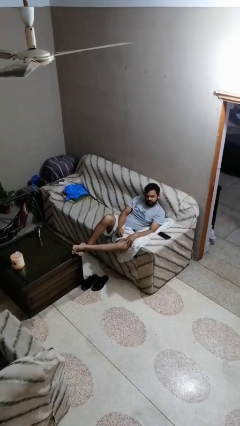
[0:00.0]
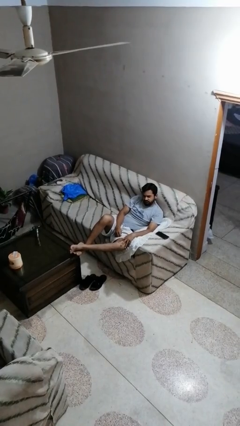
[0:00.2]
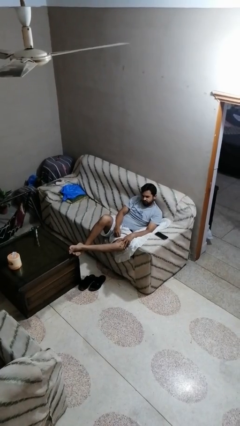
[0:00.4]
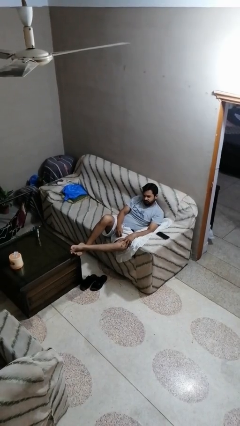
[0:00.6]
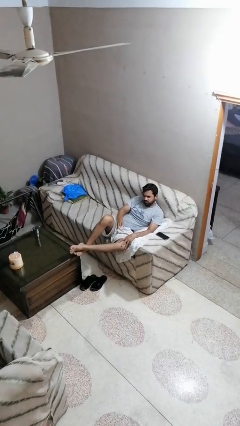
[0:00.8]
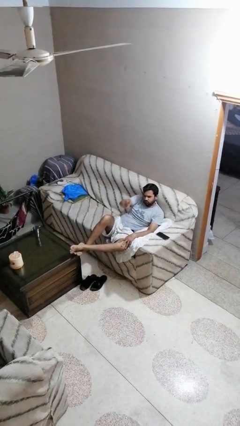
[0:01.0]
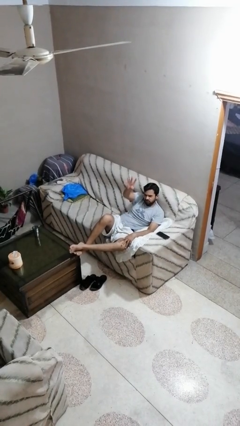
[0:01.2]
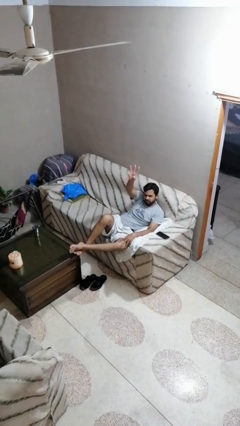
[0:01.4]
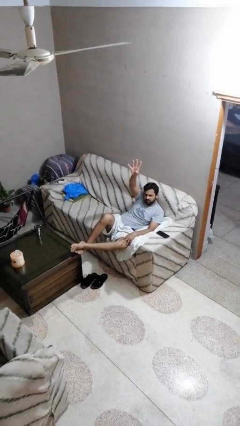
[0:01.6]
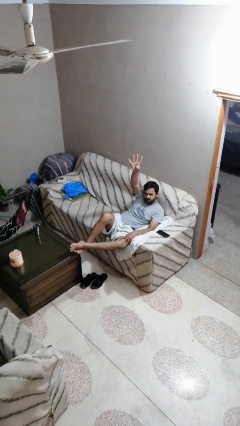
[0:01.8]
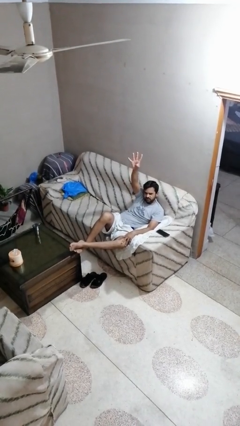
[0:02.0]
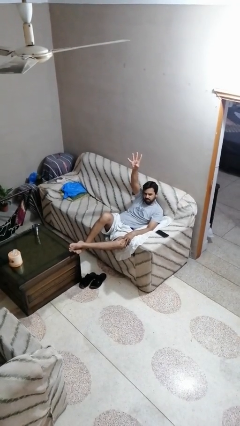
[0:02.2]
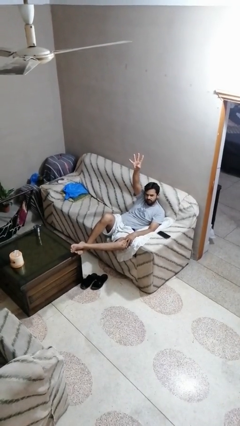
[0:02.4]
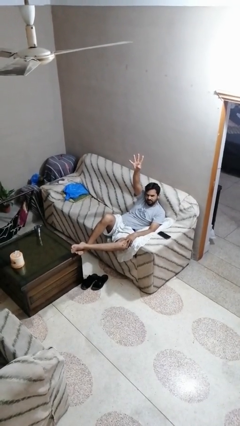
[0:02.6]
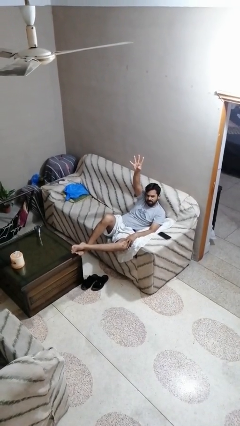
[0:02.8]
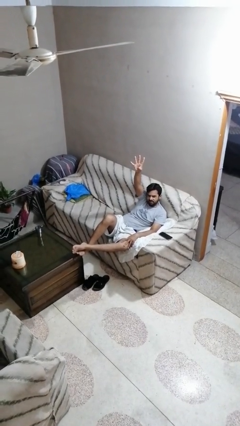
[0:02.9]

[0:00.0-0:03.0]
person gestures number four

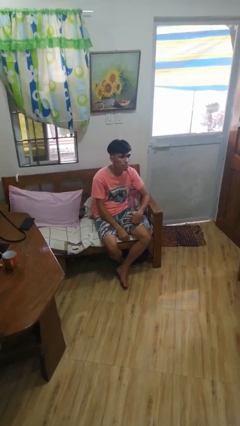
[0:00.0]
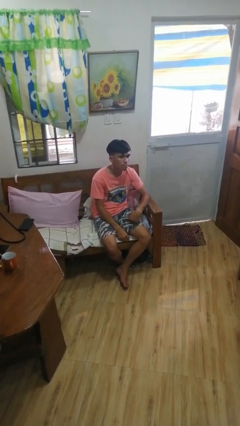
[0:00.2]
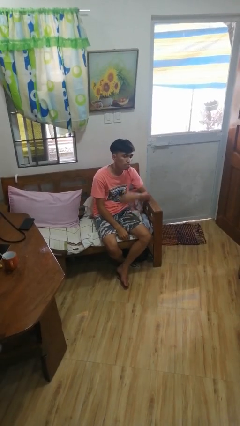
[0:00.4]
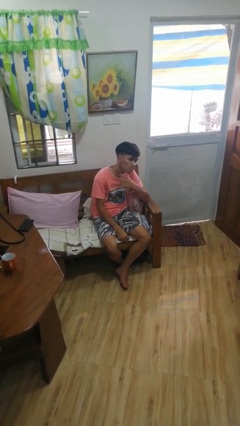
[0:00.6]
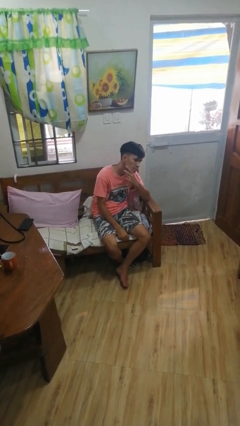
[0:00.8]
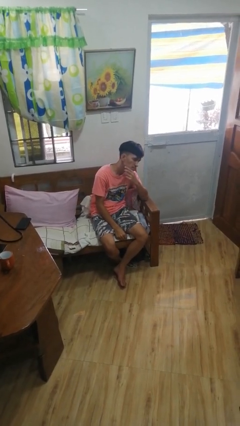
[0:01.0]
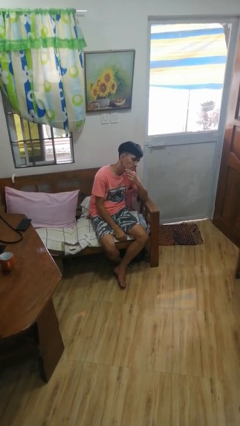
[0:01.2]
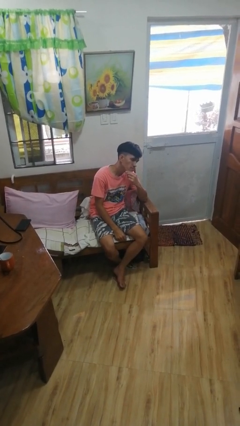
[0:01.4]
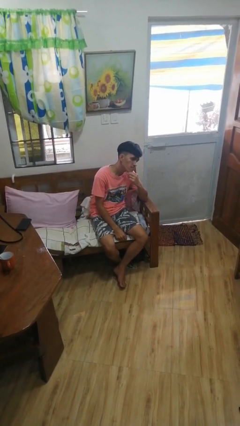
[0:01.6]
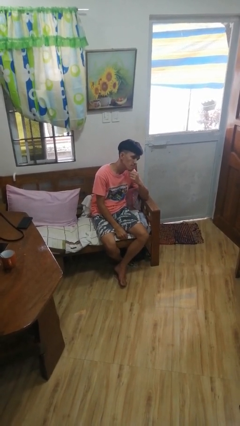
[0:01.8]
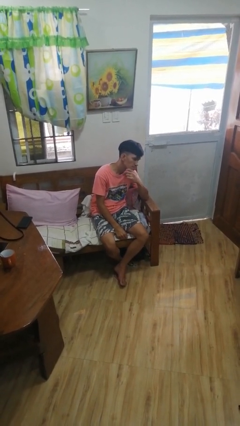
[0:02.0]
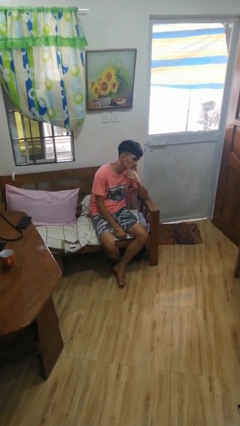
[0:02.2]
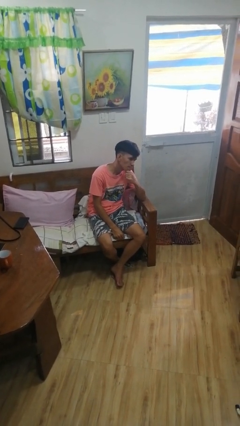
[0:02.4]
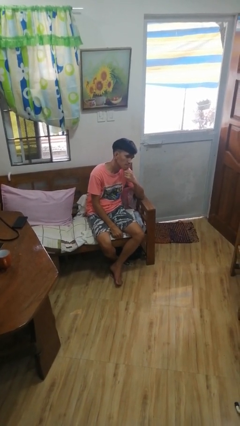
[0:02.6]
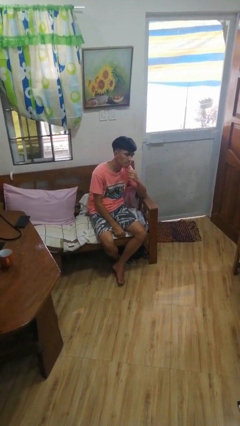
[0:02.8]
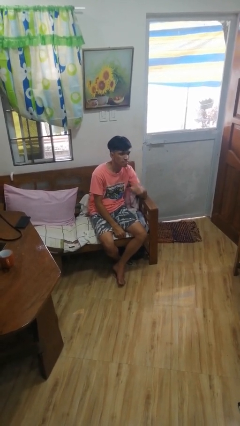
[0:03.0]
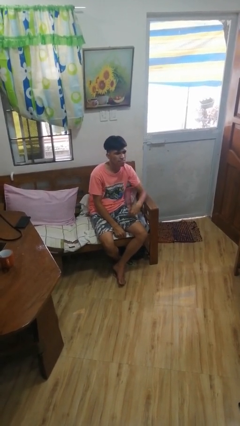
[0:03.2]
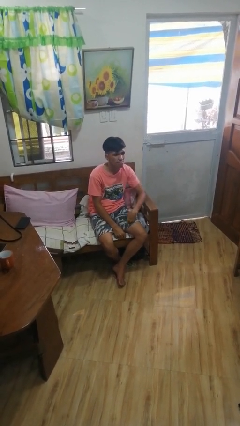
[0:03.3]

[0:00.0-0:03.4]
person strokes chin

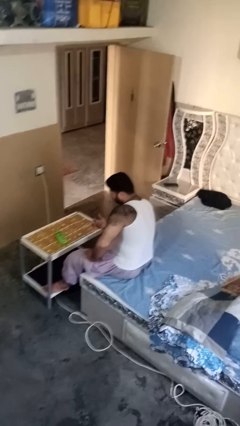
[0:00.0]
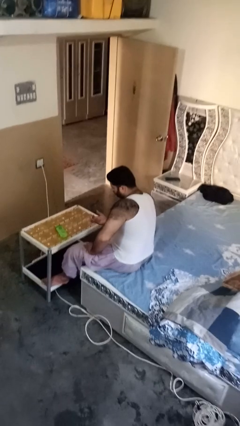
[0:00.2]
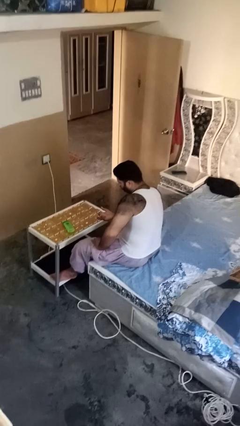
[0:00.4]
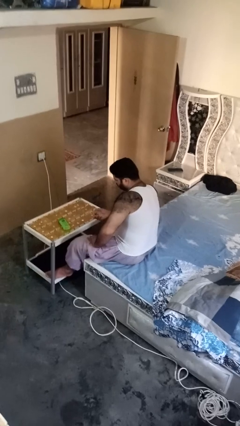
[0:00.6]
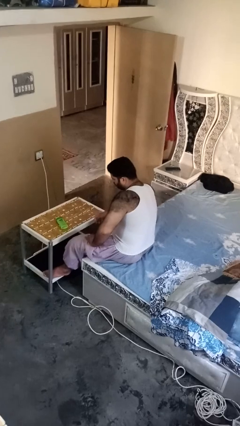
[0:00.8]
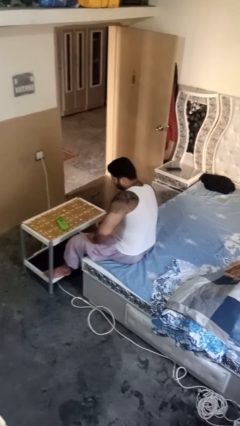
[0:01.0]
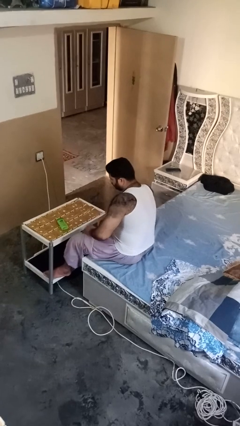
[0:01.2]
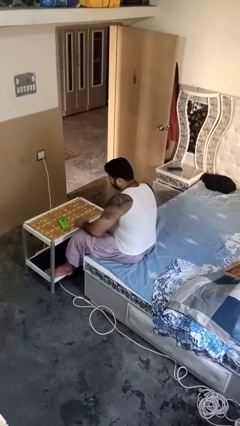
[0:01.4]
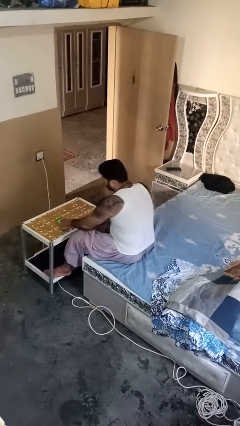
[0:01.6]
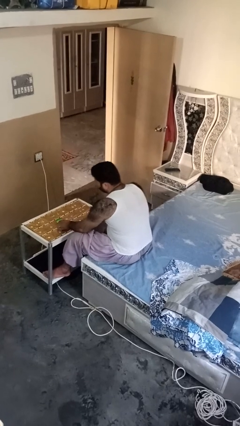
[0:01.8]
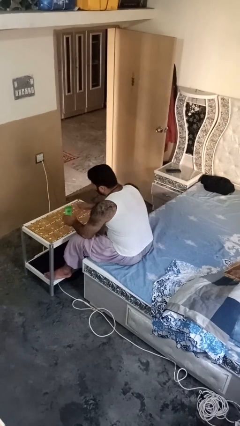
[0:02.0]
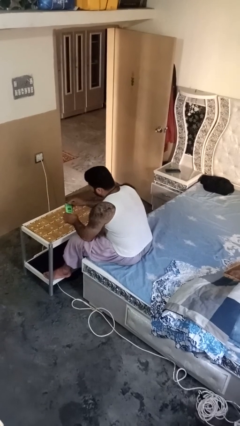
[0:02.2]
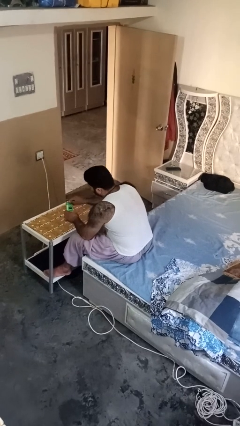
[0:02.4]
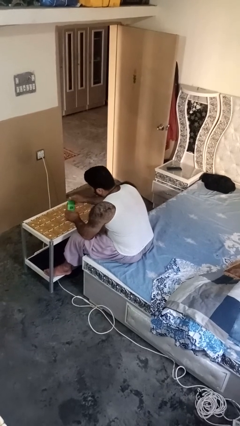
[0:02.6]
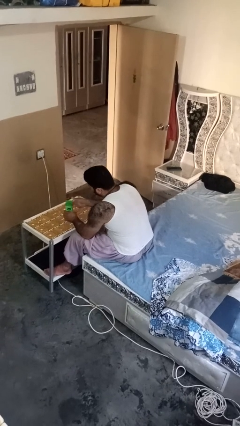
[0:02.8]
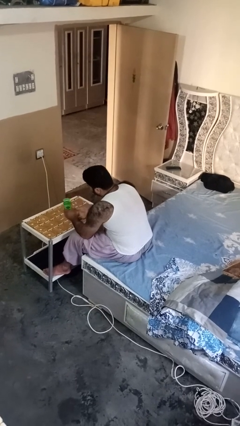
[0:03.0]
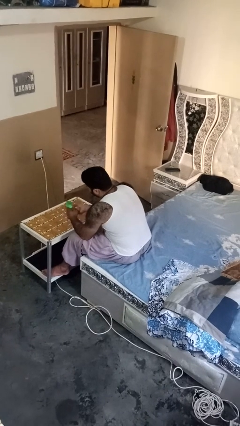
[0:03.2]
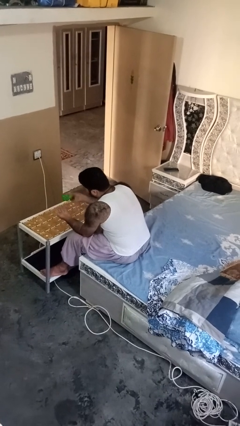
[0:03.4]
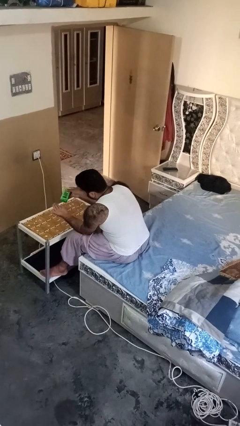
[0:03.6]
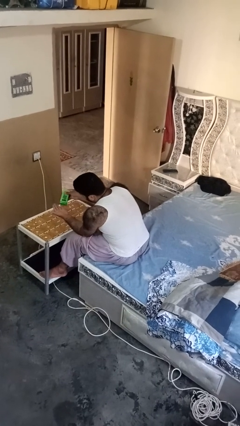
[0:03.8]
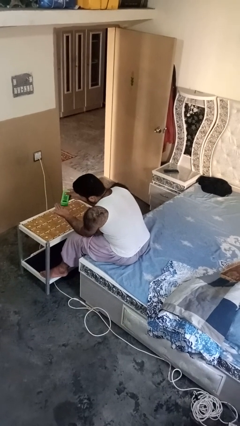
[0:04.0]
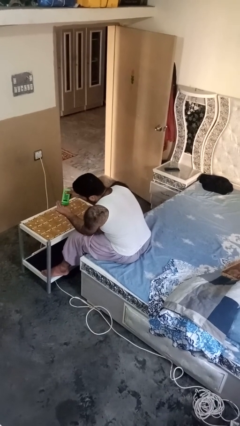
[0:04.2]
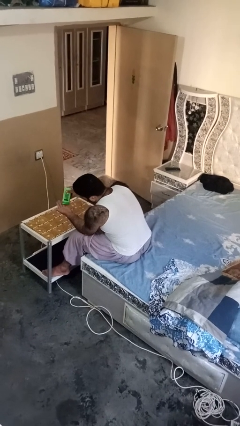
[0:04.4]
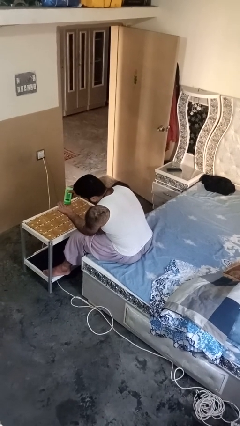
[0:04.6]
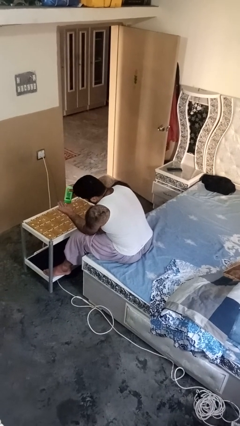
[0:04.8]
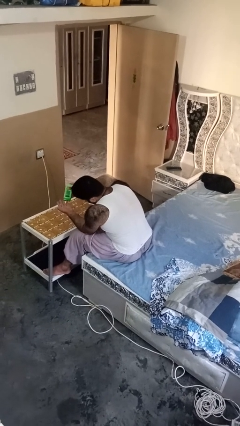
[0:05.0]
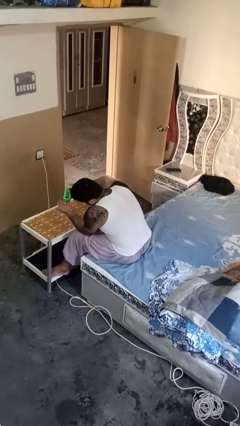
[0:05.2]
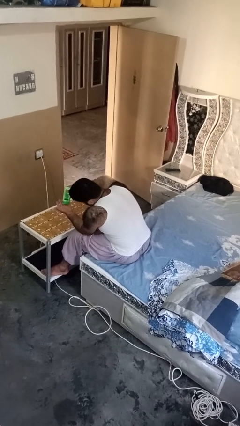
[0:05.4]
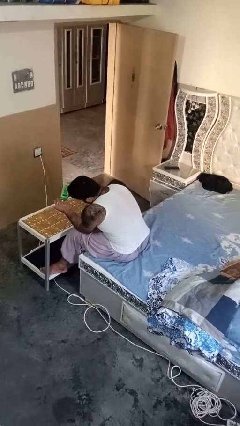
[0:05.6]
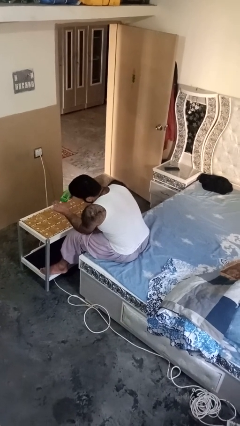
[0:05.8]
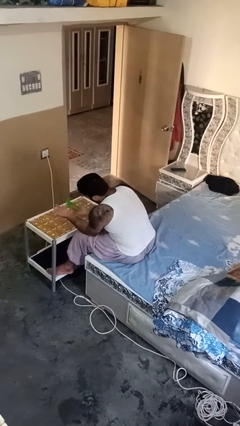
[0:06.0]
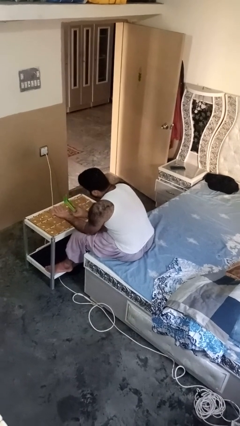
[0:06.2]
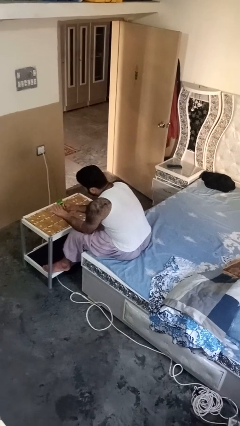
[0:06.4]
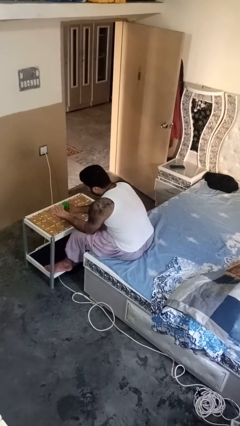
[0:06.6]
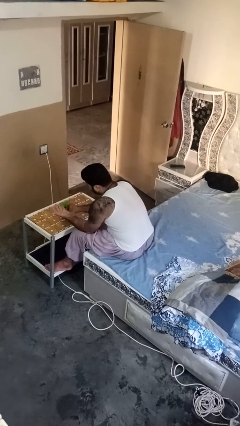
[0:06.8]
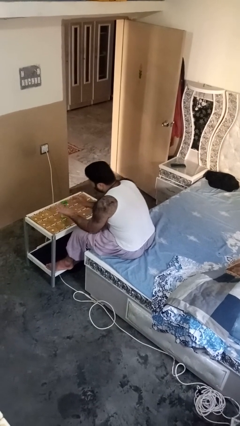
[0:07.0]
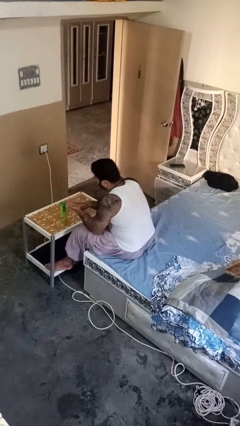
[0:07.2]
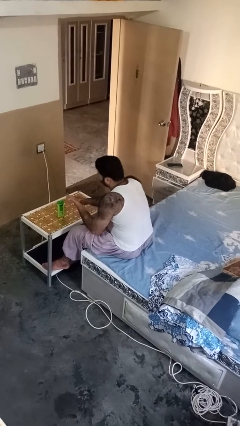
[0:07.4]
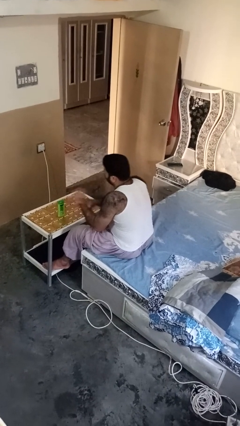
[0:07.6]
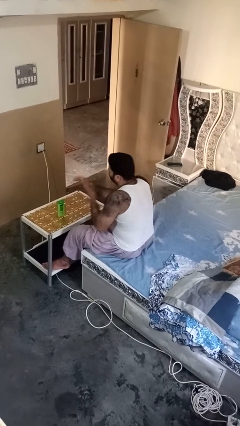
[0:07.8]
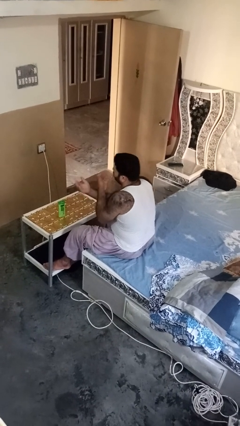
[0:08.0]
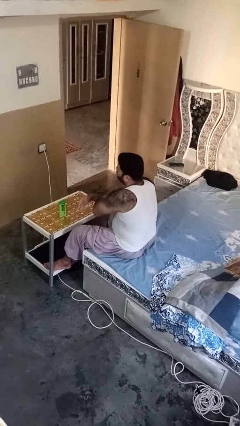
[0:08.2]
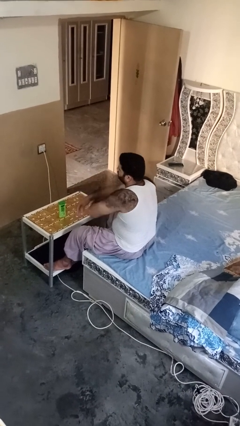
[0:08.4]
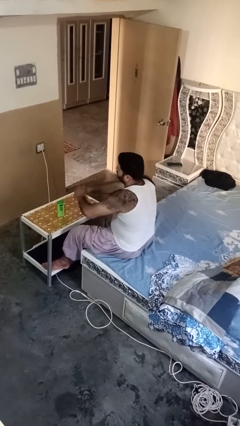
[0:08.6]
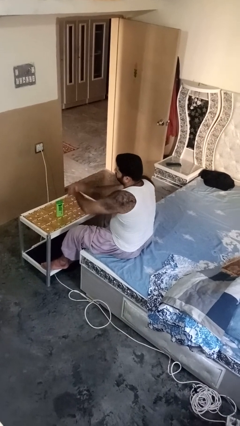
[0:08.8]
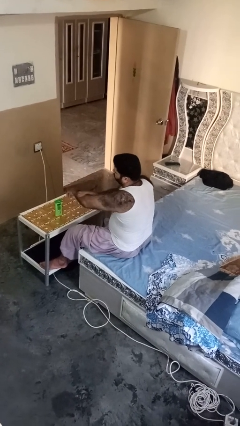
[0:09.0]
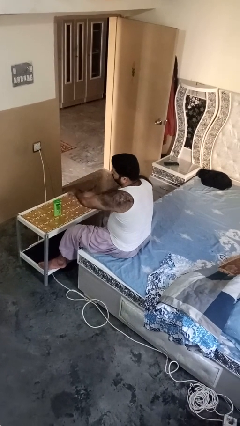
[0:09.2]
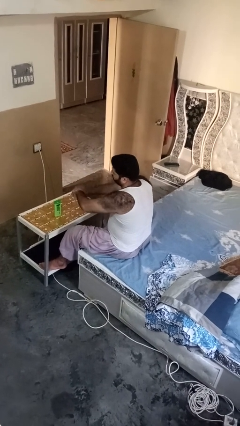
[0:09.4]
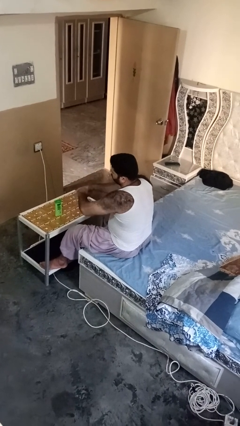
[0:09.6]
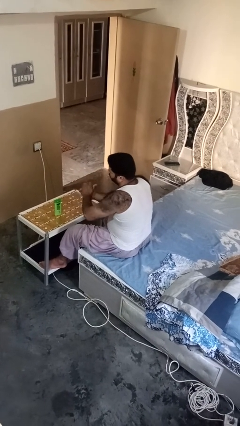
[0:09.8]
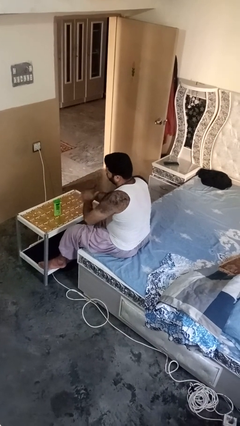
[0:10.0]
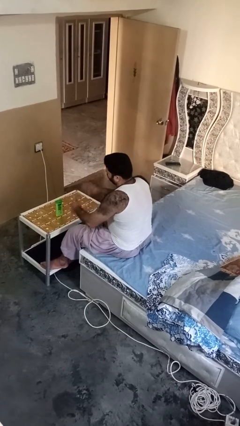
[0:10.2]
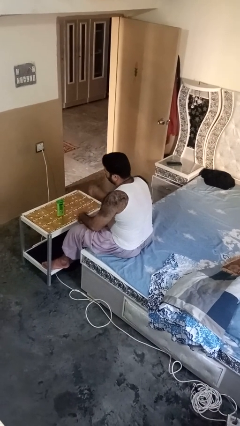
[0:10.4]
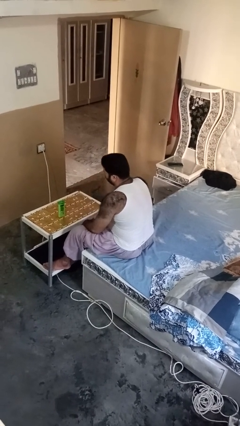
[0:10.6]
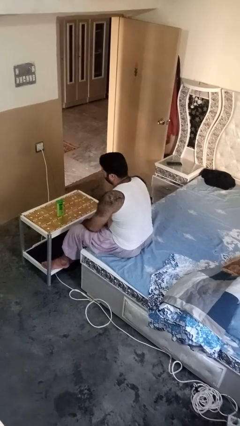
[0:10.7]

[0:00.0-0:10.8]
person applies sunscreen

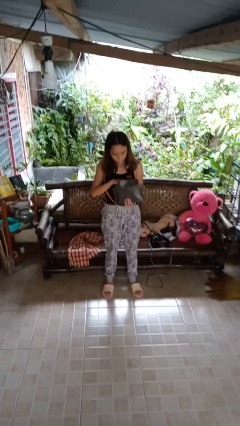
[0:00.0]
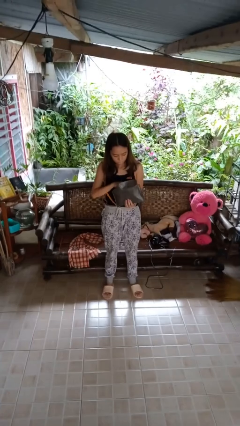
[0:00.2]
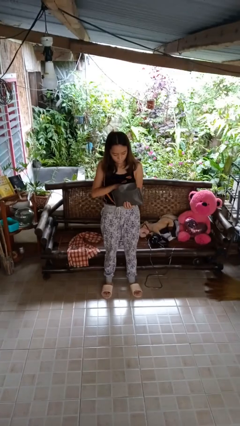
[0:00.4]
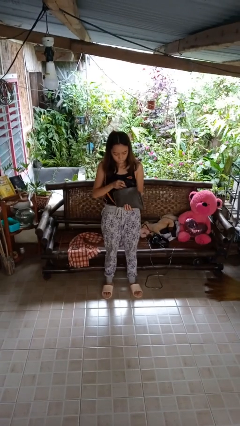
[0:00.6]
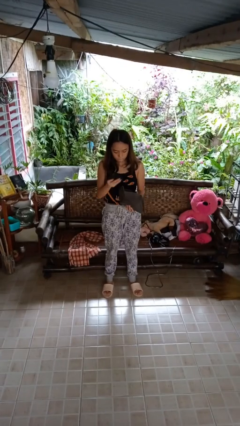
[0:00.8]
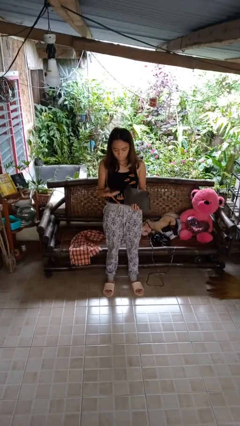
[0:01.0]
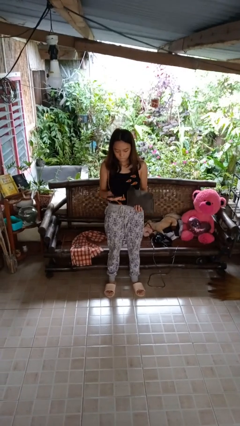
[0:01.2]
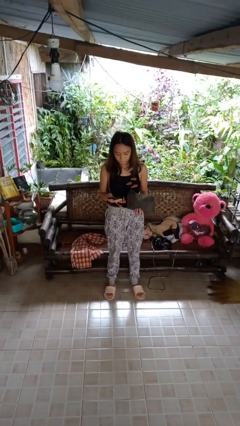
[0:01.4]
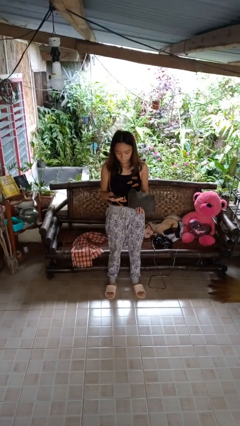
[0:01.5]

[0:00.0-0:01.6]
person takes object from purse
